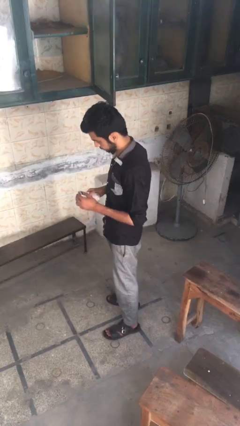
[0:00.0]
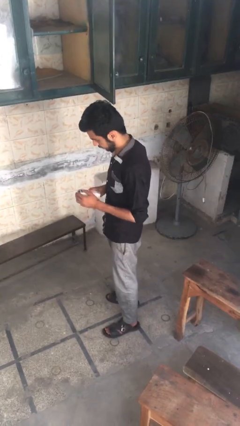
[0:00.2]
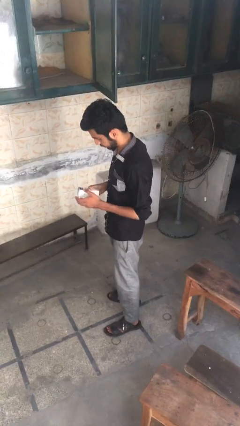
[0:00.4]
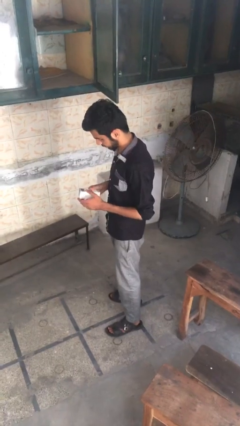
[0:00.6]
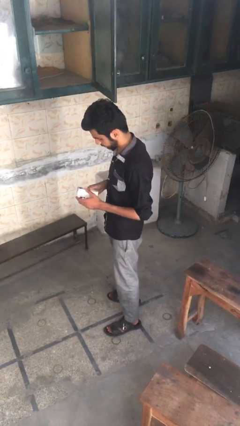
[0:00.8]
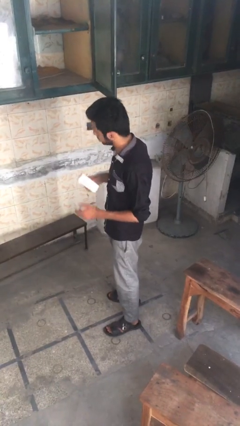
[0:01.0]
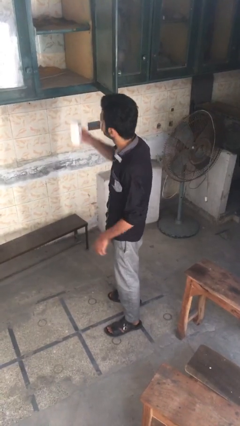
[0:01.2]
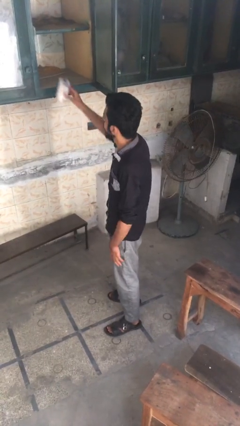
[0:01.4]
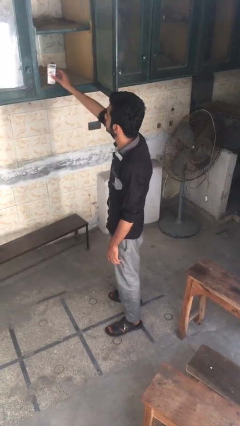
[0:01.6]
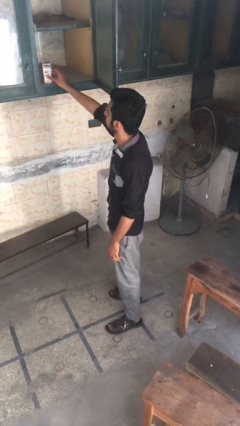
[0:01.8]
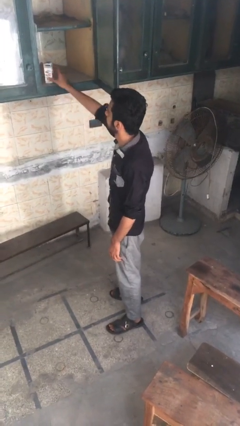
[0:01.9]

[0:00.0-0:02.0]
person puts object in cabinet

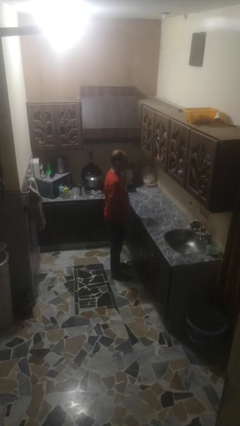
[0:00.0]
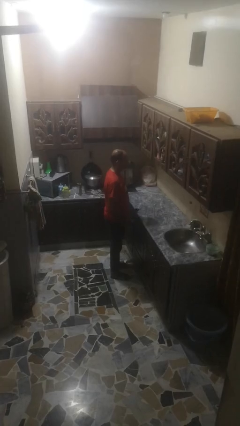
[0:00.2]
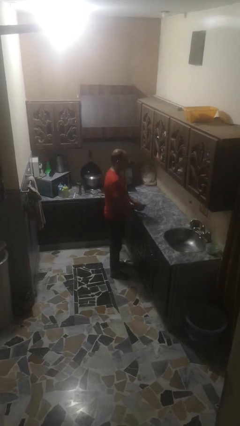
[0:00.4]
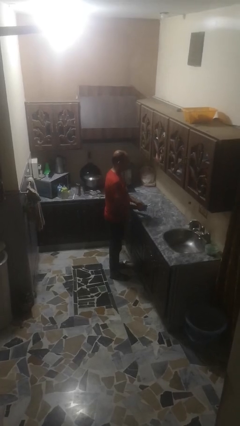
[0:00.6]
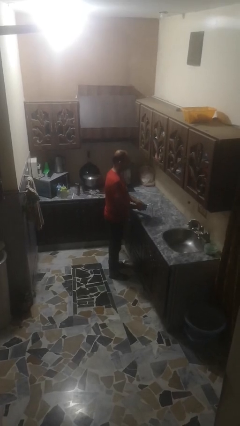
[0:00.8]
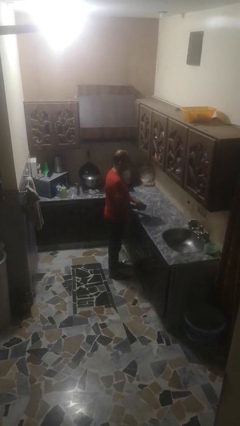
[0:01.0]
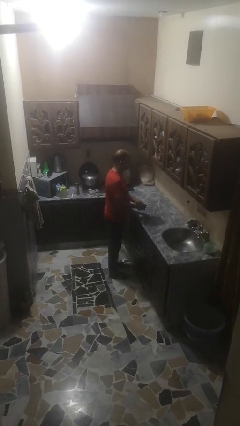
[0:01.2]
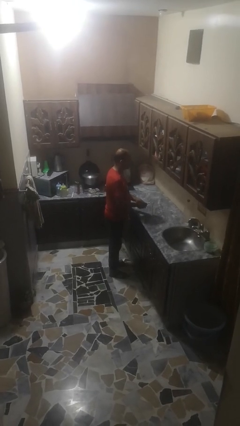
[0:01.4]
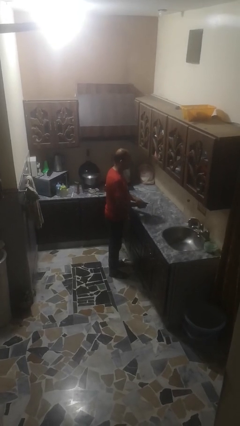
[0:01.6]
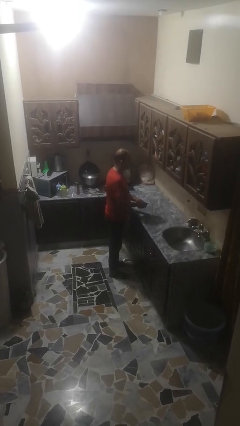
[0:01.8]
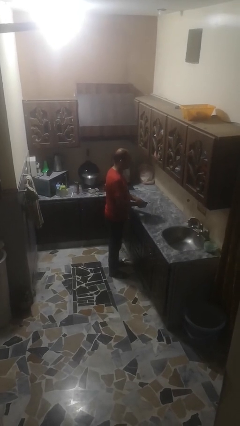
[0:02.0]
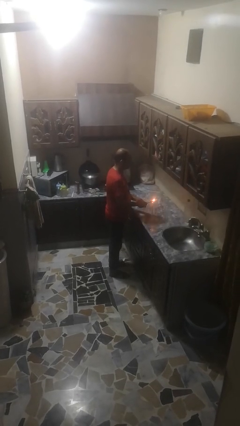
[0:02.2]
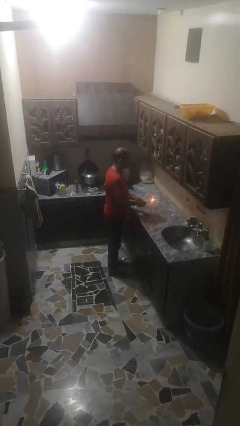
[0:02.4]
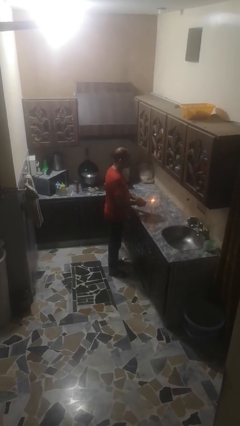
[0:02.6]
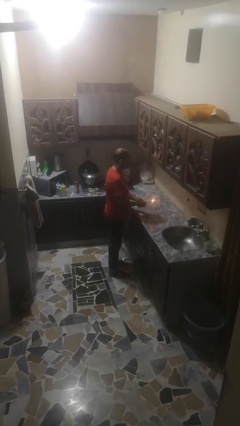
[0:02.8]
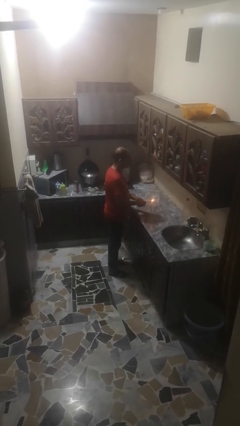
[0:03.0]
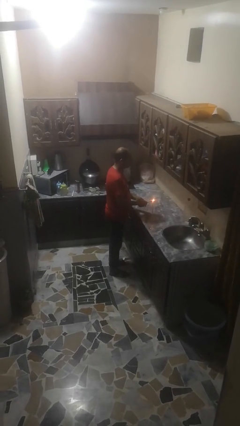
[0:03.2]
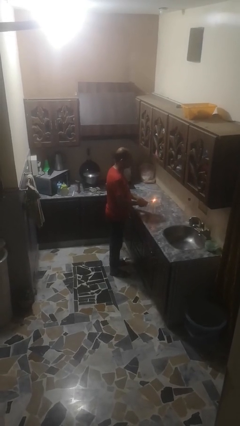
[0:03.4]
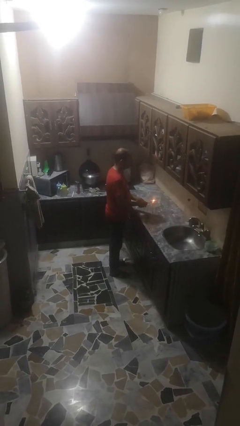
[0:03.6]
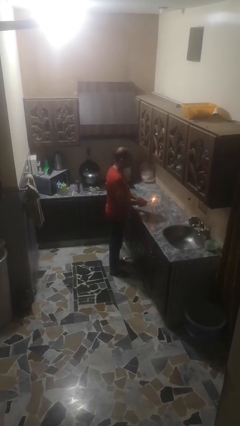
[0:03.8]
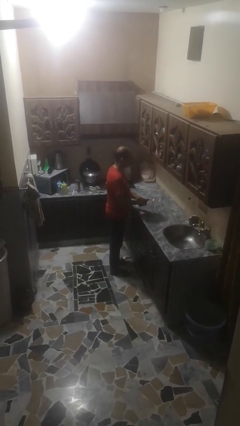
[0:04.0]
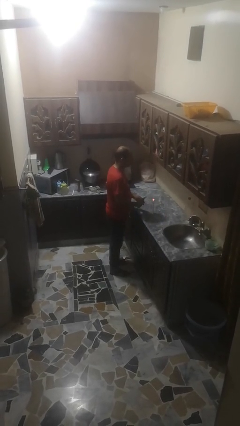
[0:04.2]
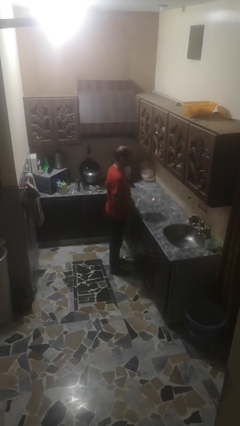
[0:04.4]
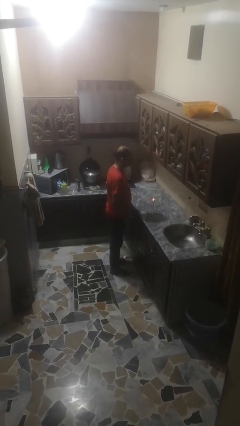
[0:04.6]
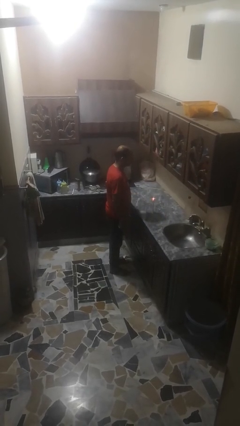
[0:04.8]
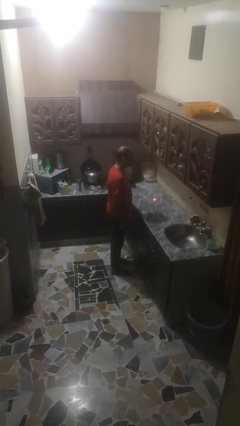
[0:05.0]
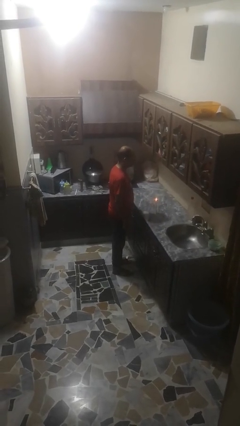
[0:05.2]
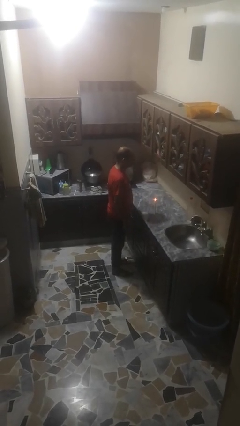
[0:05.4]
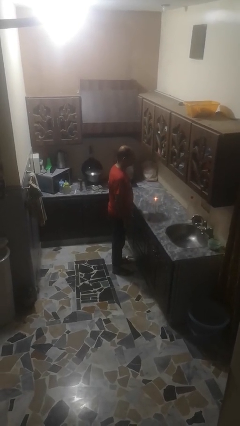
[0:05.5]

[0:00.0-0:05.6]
person lights candle

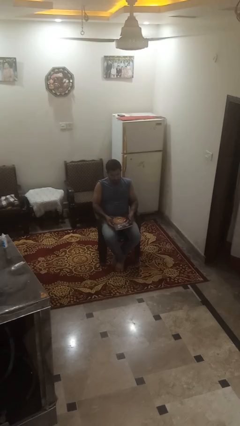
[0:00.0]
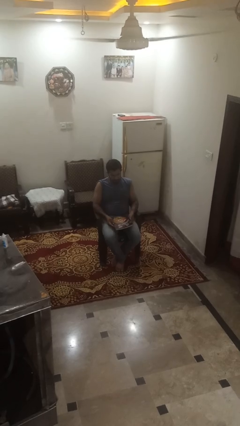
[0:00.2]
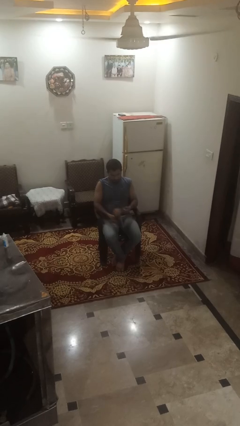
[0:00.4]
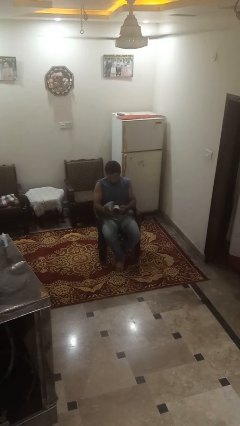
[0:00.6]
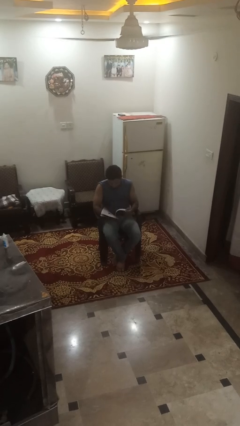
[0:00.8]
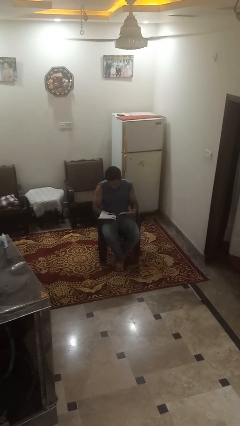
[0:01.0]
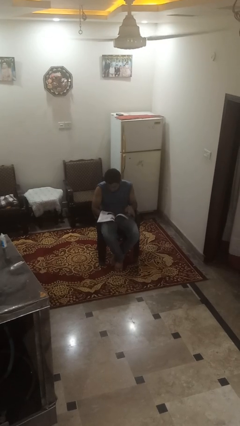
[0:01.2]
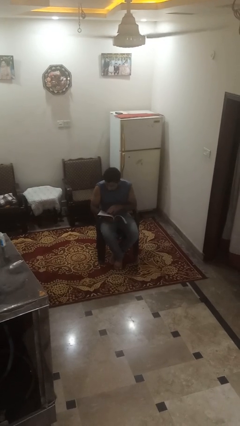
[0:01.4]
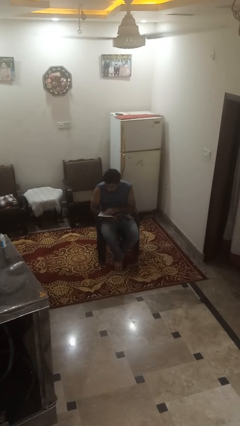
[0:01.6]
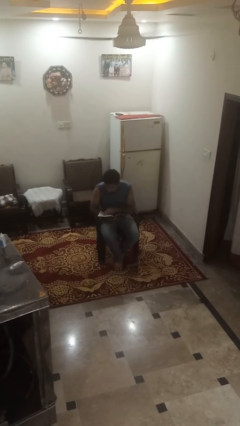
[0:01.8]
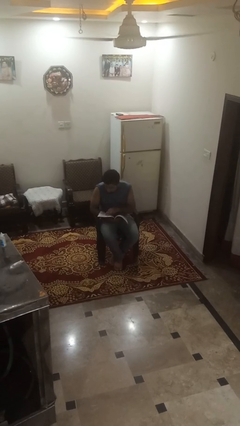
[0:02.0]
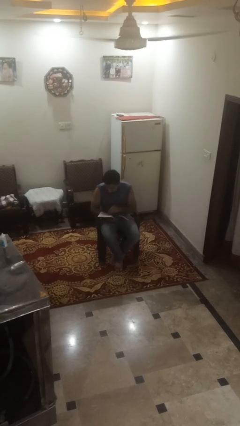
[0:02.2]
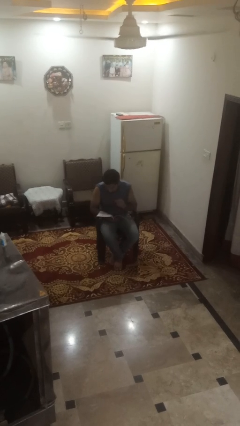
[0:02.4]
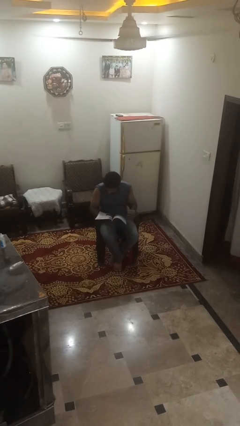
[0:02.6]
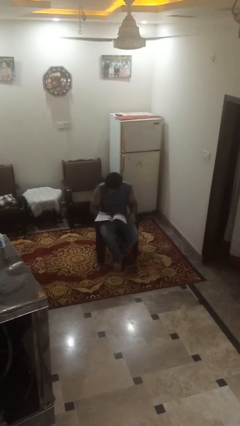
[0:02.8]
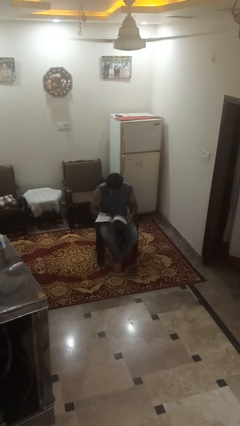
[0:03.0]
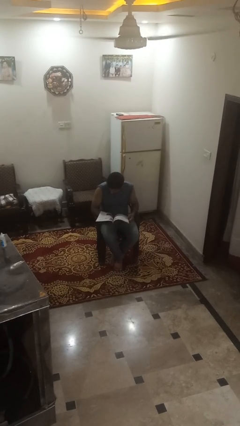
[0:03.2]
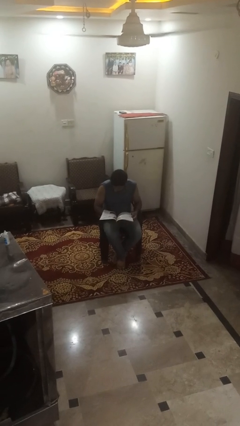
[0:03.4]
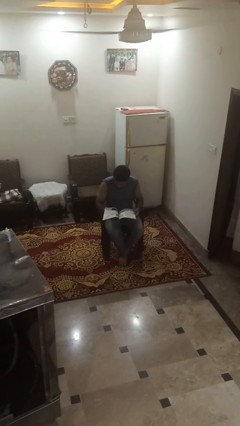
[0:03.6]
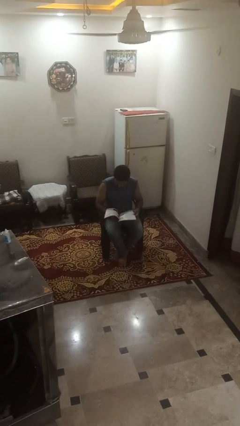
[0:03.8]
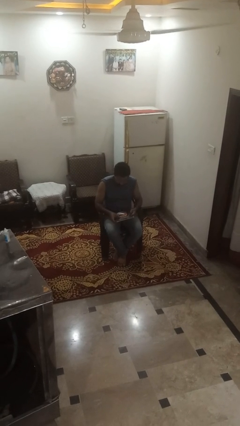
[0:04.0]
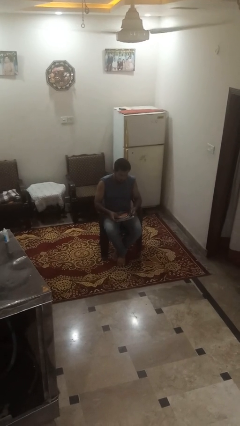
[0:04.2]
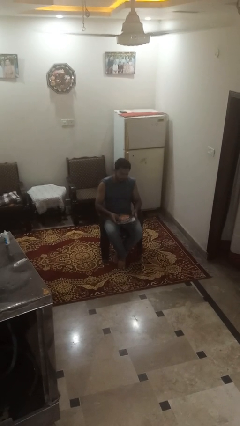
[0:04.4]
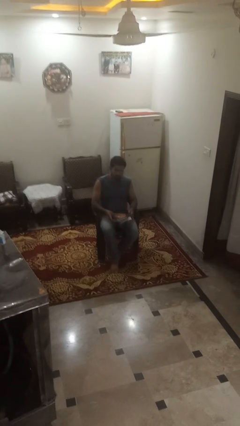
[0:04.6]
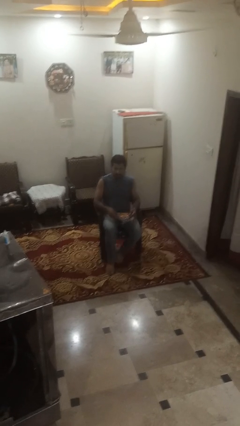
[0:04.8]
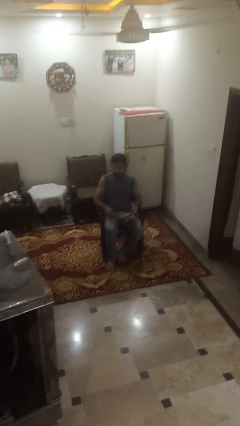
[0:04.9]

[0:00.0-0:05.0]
person reads magazine

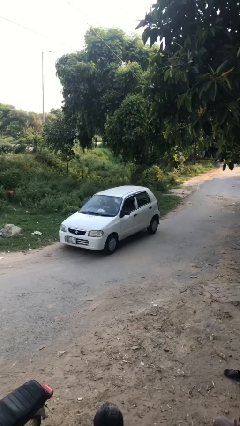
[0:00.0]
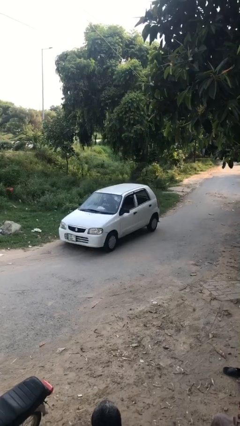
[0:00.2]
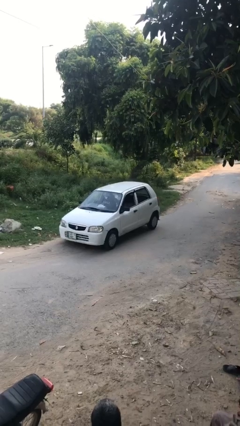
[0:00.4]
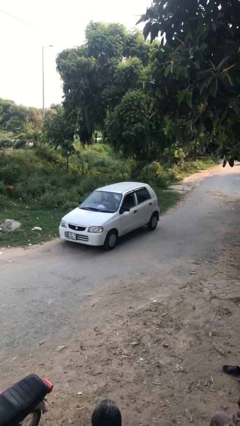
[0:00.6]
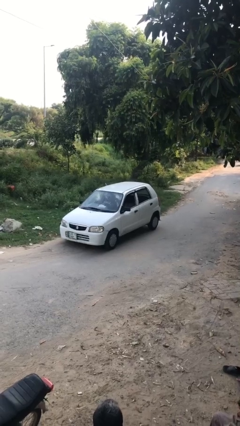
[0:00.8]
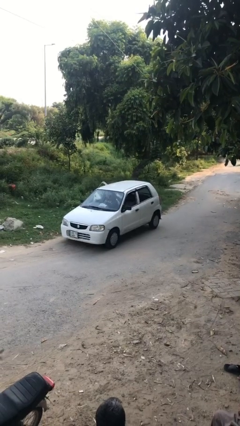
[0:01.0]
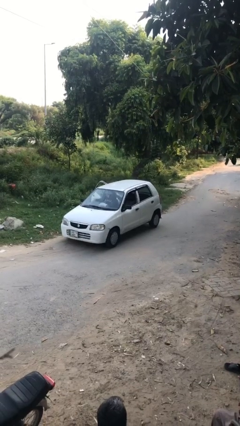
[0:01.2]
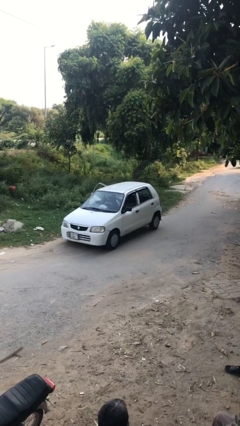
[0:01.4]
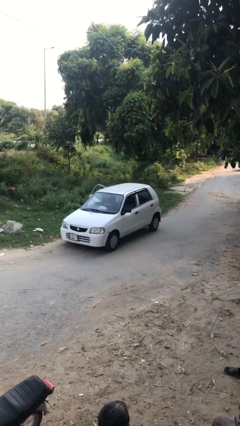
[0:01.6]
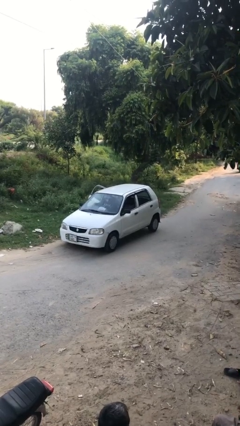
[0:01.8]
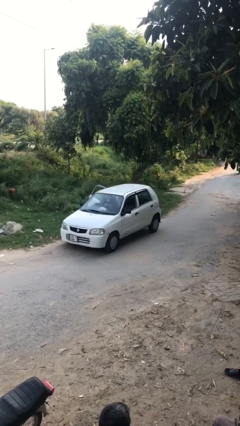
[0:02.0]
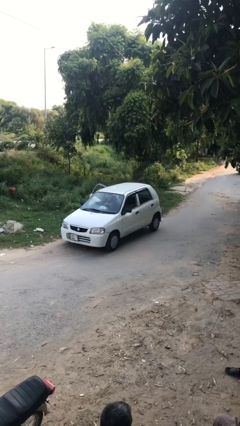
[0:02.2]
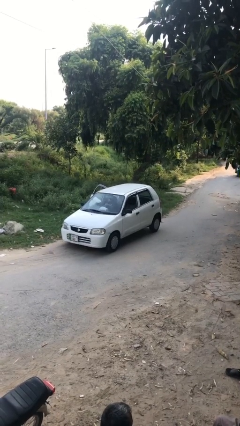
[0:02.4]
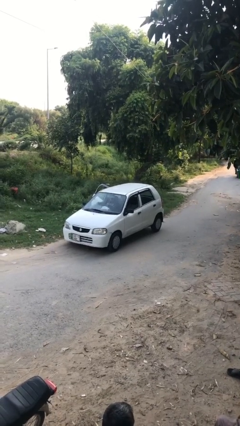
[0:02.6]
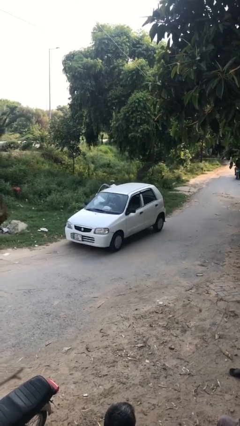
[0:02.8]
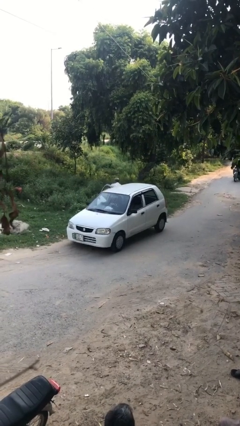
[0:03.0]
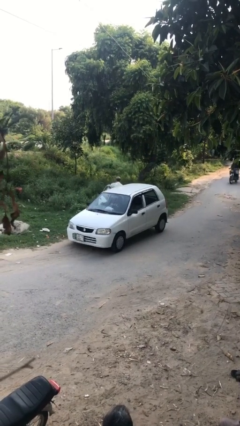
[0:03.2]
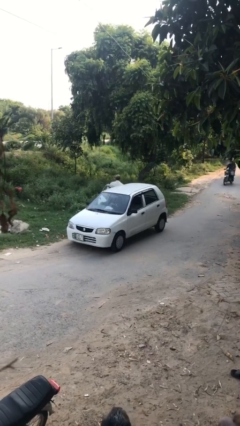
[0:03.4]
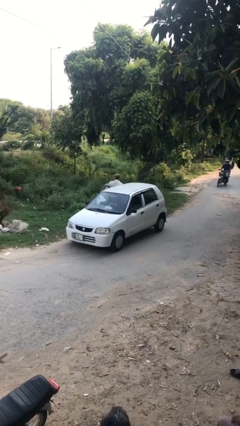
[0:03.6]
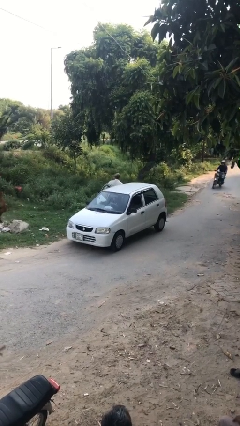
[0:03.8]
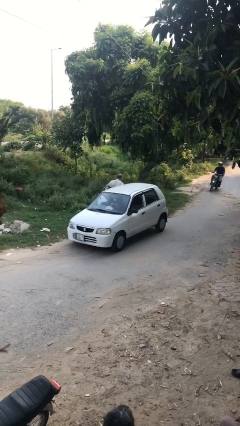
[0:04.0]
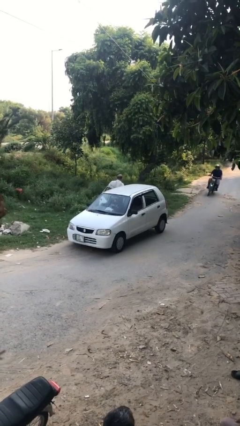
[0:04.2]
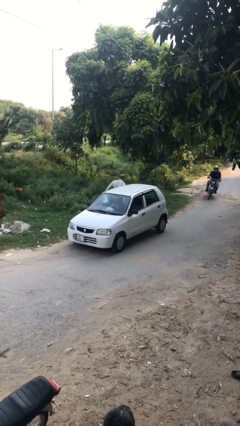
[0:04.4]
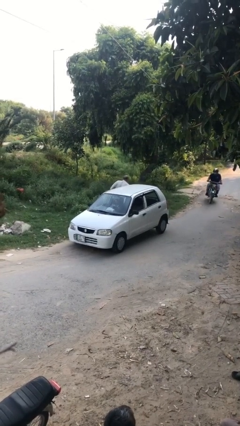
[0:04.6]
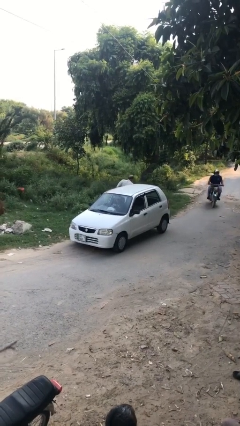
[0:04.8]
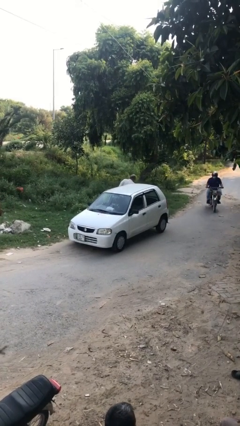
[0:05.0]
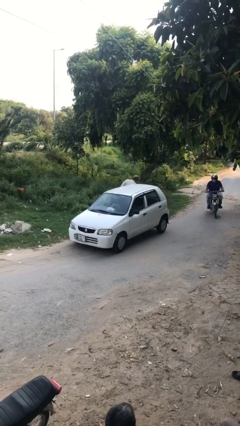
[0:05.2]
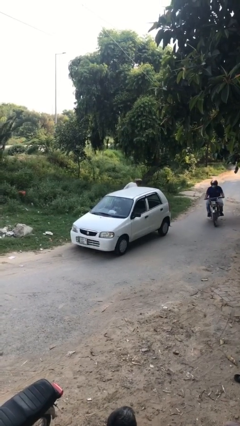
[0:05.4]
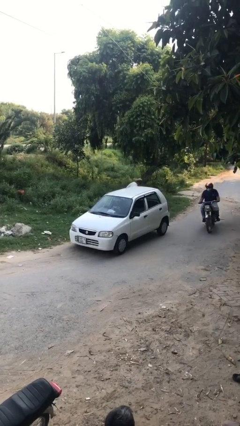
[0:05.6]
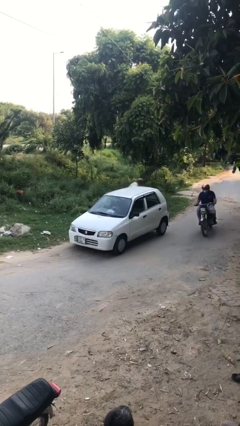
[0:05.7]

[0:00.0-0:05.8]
car drops off person
